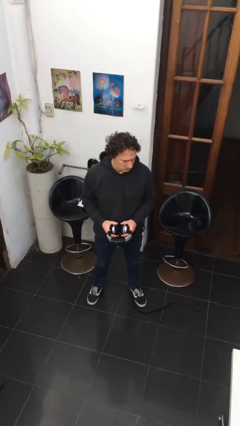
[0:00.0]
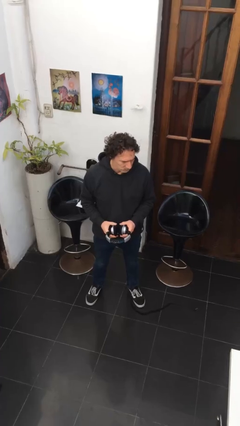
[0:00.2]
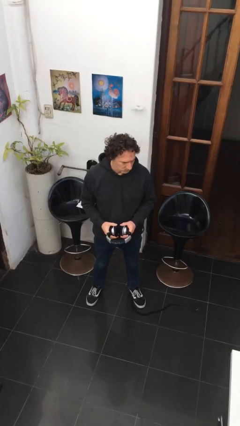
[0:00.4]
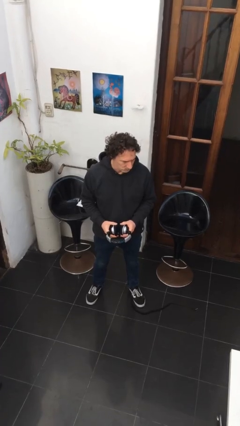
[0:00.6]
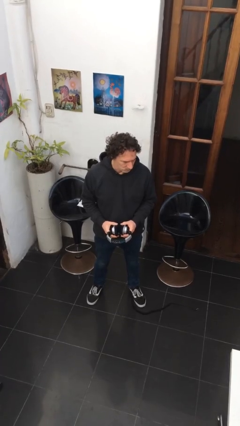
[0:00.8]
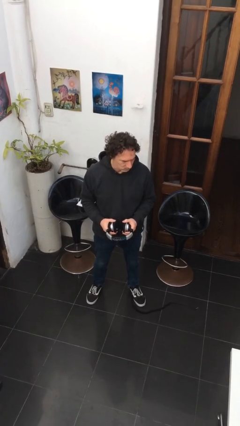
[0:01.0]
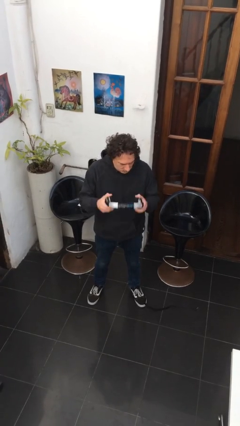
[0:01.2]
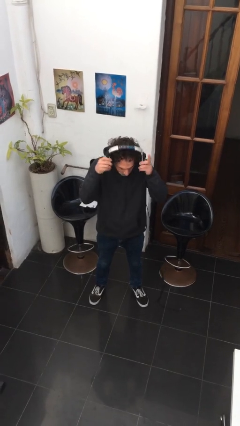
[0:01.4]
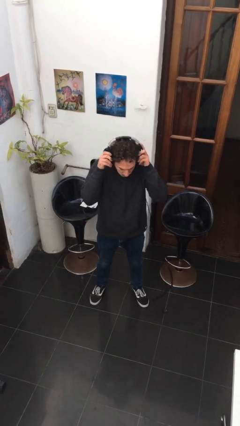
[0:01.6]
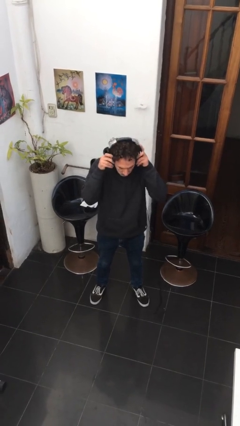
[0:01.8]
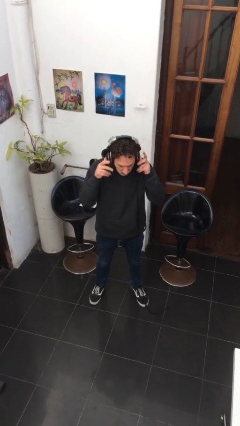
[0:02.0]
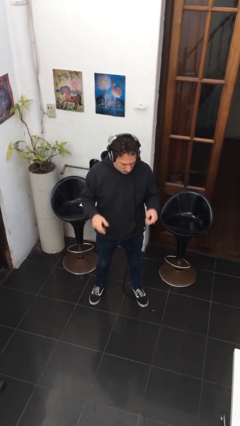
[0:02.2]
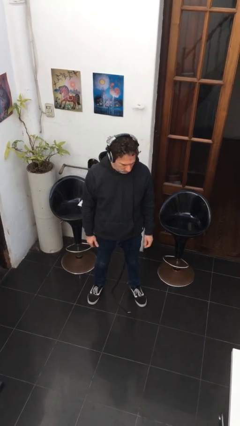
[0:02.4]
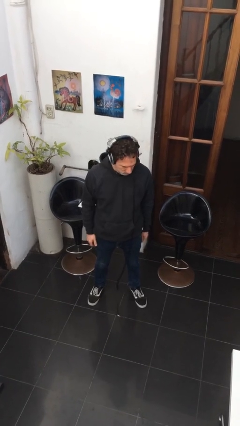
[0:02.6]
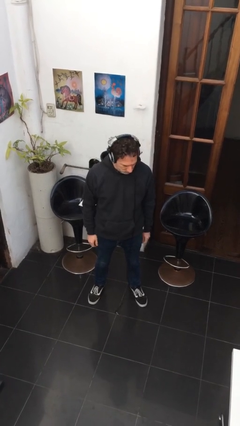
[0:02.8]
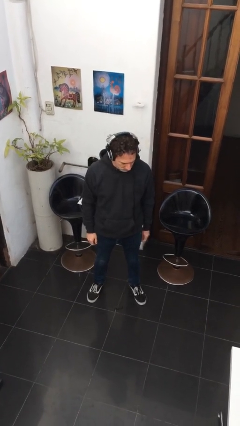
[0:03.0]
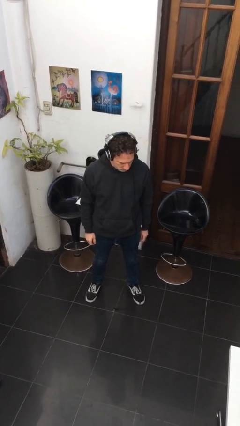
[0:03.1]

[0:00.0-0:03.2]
person puts on headphones

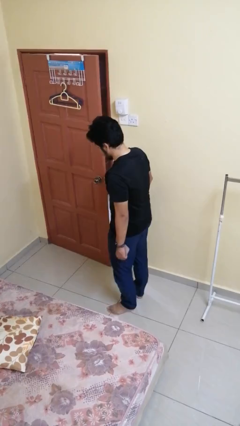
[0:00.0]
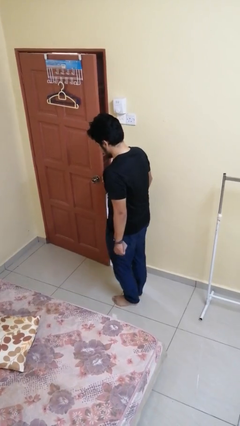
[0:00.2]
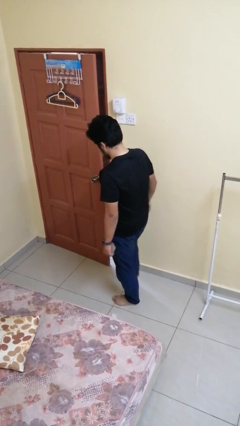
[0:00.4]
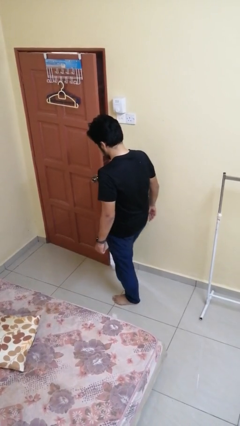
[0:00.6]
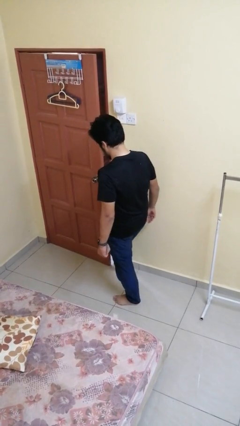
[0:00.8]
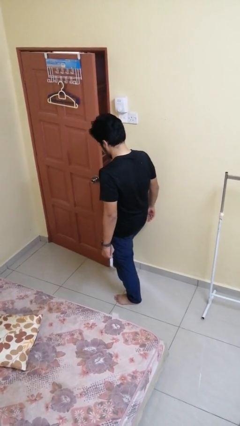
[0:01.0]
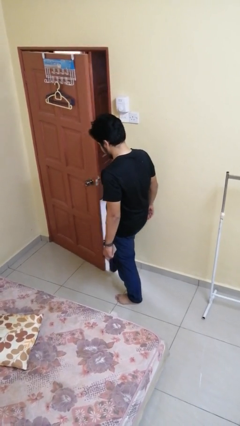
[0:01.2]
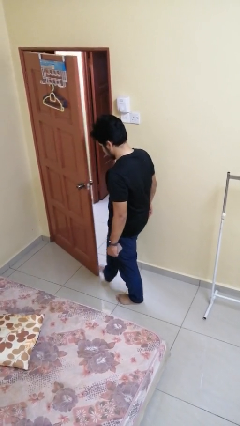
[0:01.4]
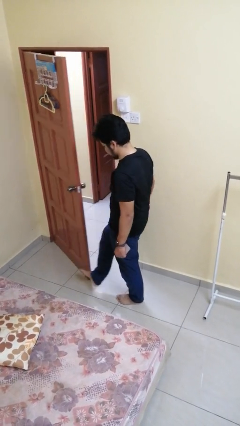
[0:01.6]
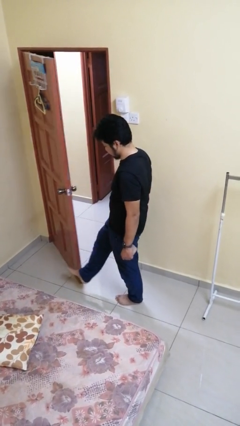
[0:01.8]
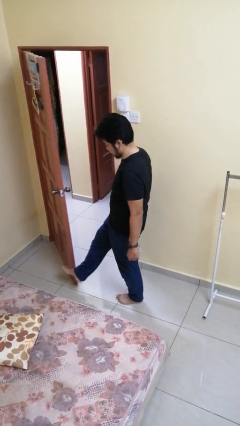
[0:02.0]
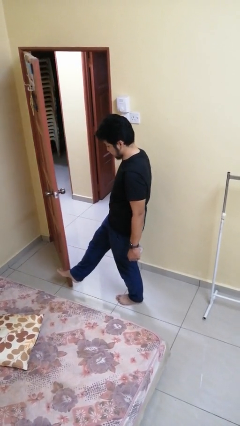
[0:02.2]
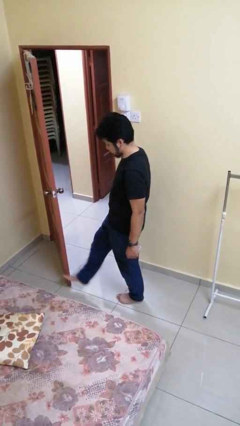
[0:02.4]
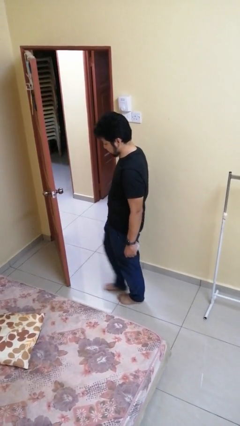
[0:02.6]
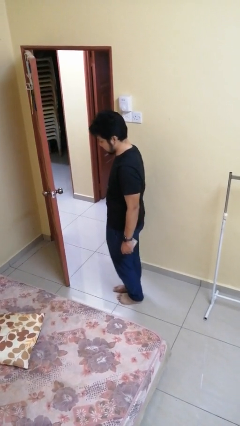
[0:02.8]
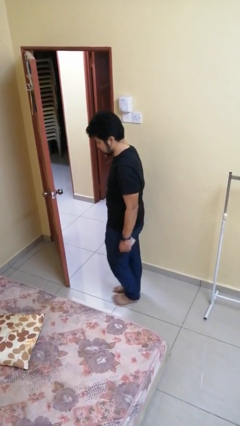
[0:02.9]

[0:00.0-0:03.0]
person opens facility door

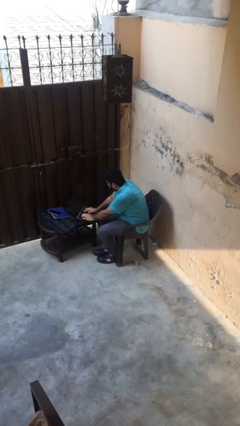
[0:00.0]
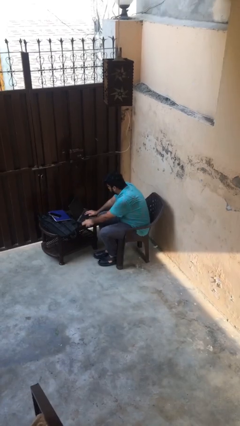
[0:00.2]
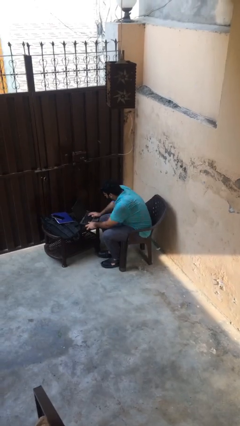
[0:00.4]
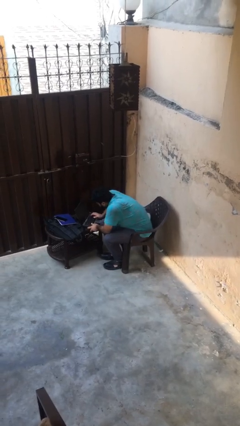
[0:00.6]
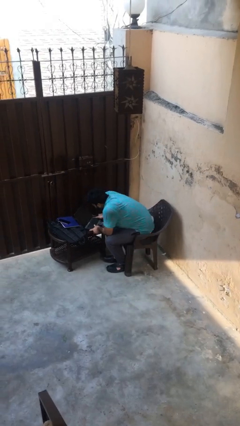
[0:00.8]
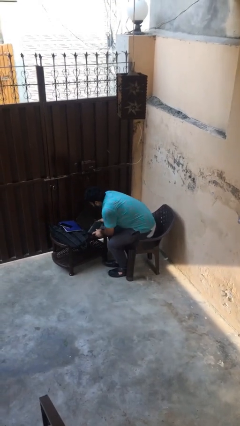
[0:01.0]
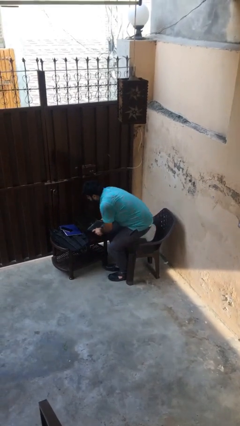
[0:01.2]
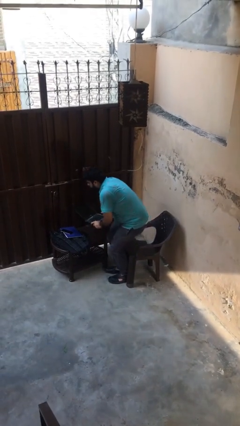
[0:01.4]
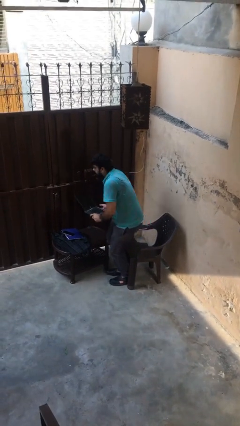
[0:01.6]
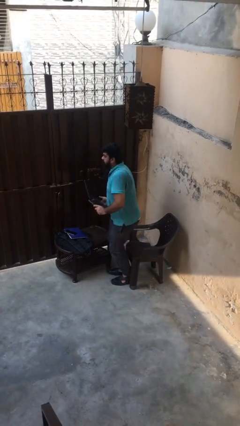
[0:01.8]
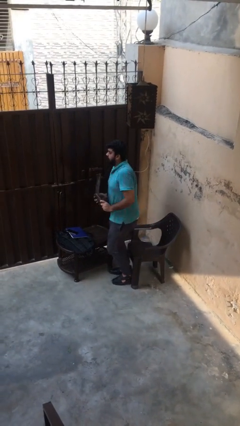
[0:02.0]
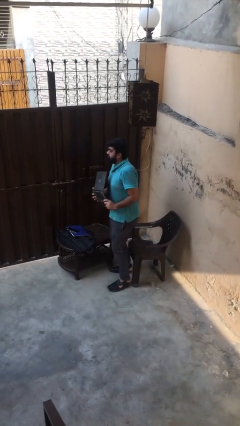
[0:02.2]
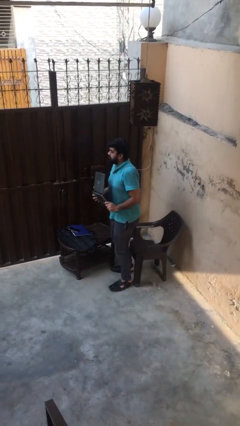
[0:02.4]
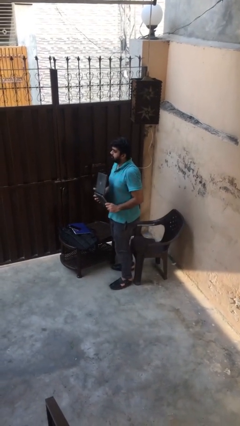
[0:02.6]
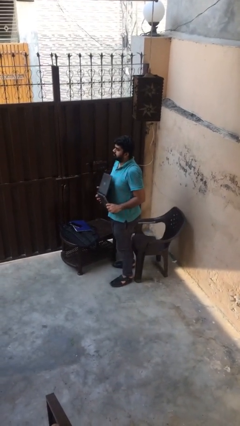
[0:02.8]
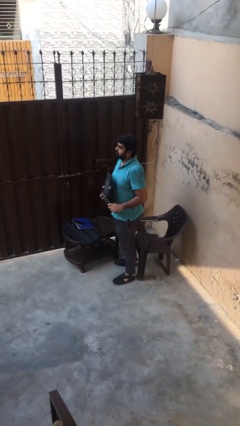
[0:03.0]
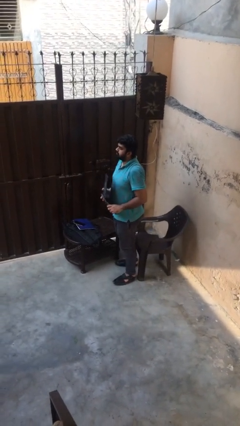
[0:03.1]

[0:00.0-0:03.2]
person stands up

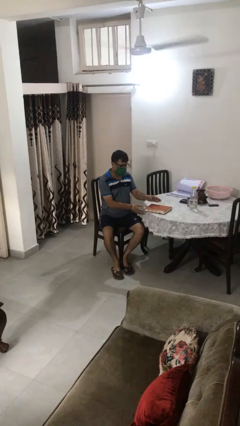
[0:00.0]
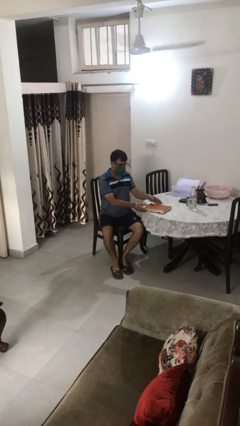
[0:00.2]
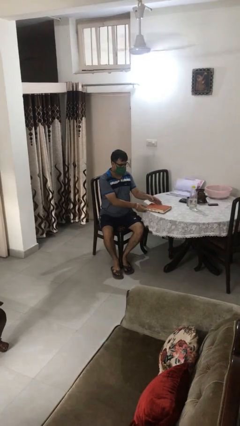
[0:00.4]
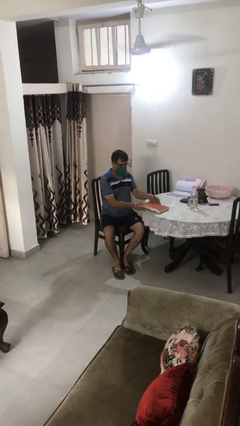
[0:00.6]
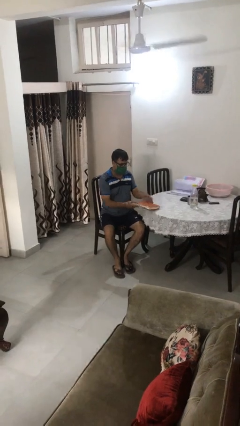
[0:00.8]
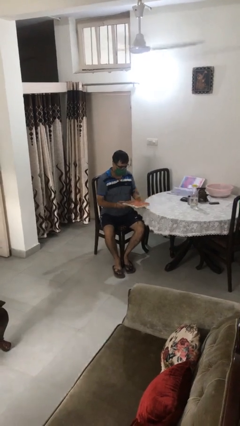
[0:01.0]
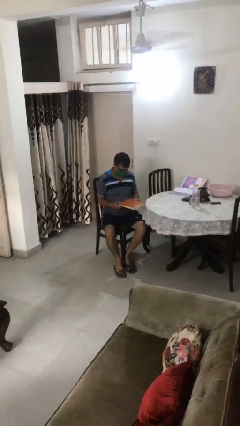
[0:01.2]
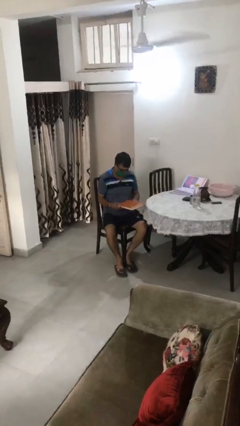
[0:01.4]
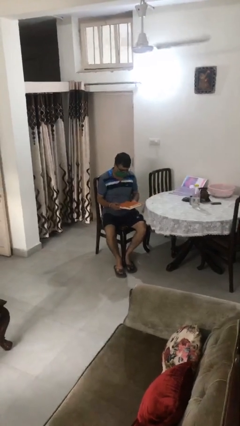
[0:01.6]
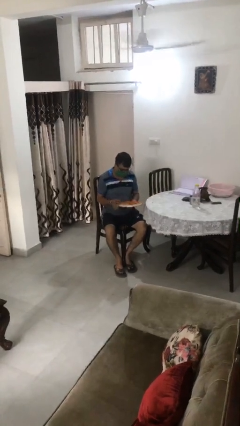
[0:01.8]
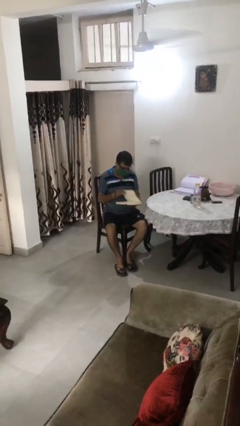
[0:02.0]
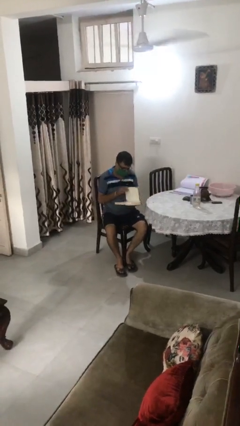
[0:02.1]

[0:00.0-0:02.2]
person picks up object from table

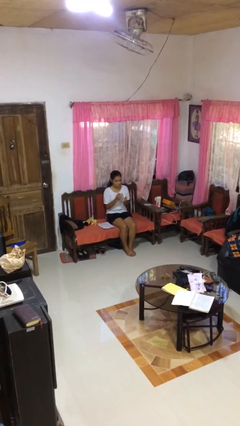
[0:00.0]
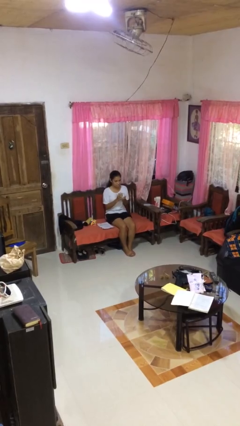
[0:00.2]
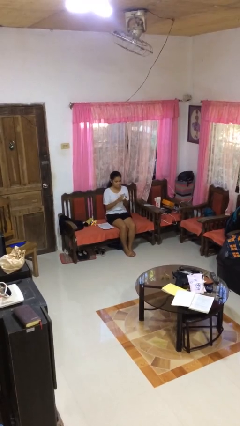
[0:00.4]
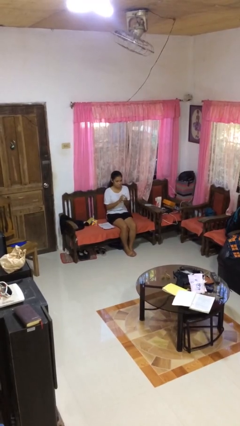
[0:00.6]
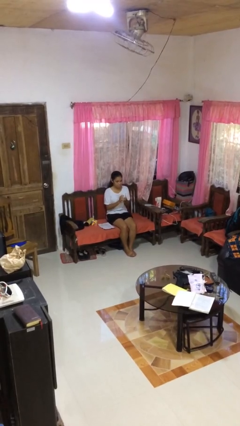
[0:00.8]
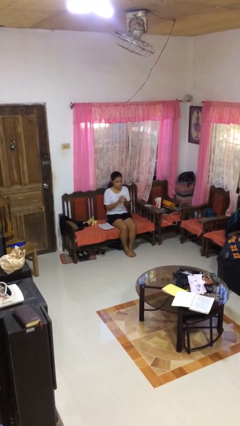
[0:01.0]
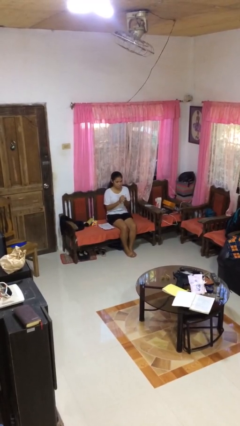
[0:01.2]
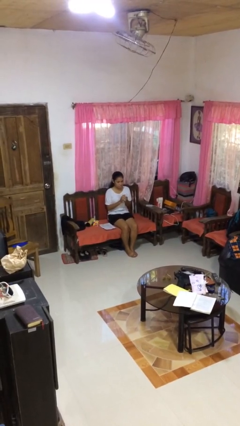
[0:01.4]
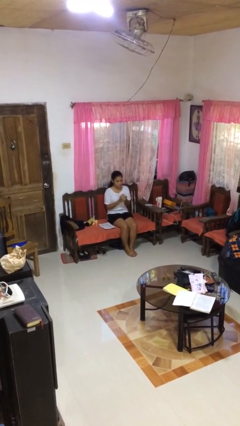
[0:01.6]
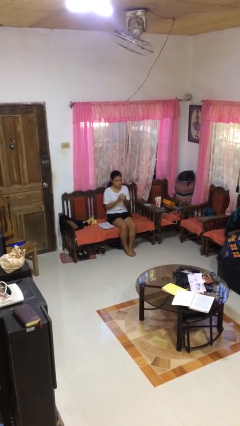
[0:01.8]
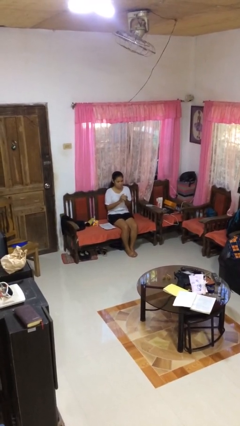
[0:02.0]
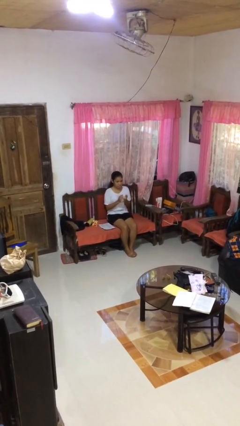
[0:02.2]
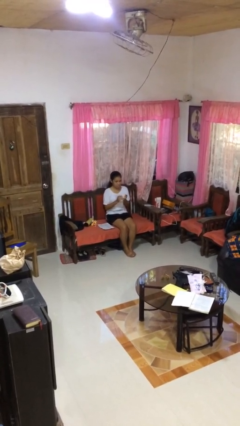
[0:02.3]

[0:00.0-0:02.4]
person crumples paper

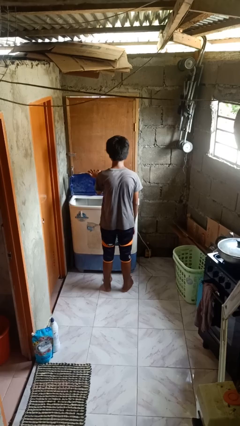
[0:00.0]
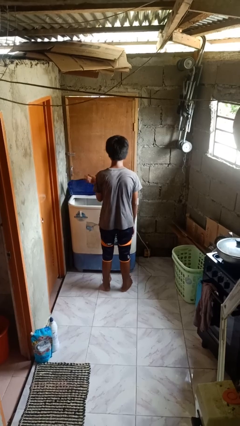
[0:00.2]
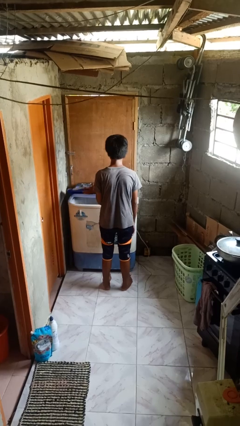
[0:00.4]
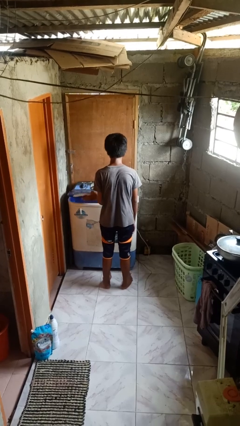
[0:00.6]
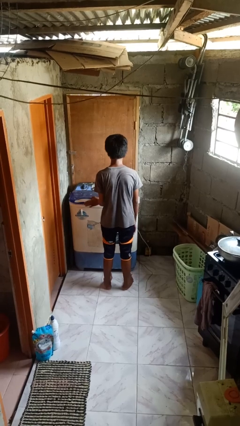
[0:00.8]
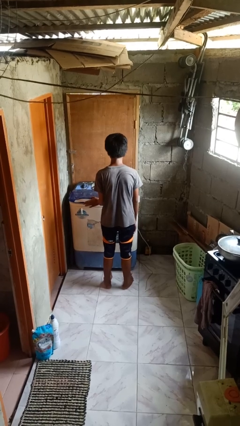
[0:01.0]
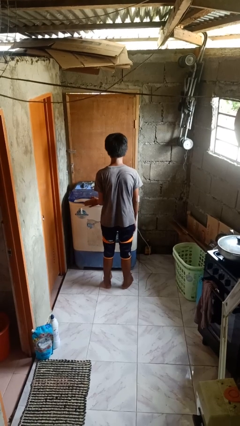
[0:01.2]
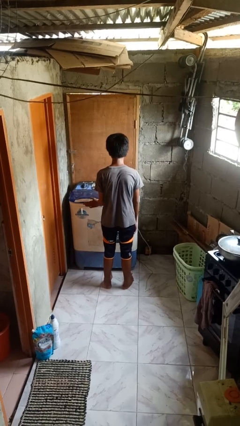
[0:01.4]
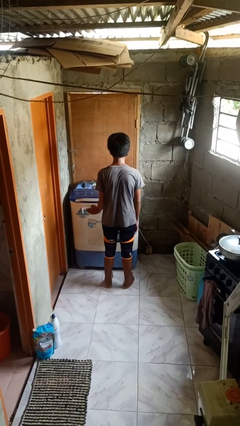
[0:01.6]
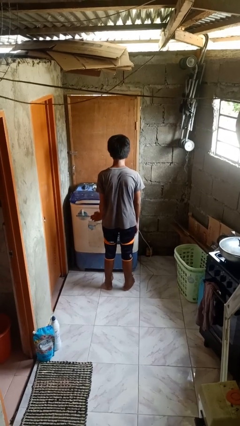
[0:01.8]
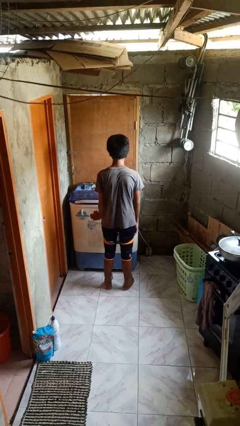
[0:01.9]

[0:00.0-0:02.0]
person closes clothes washer

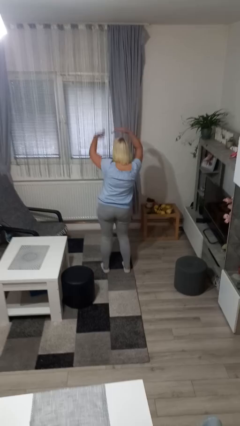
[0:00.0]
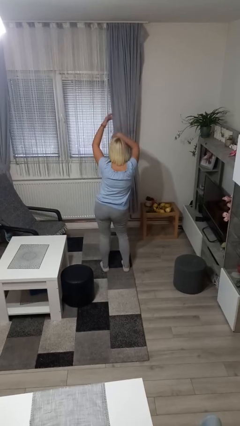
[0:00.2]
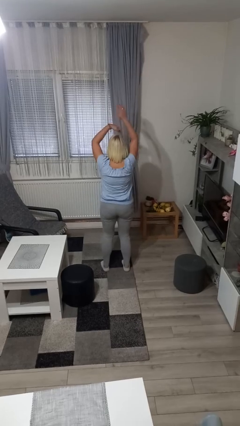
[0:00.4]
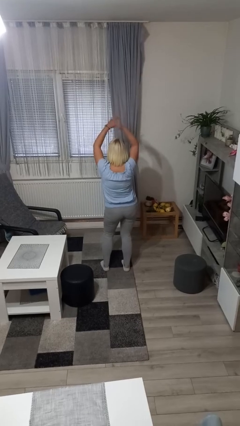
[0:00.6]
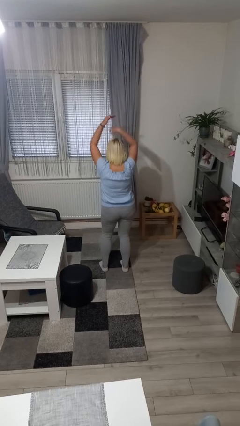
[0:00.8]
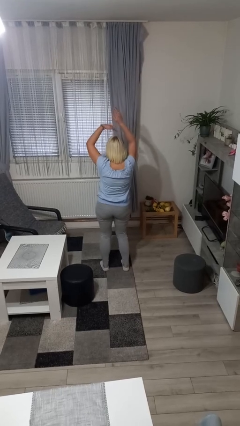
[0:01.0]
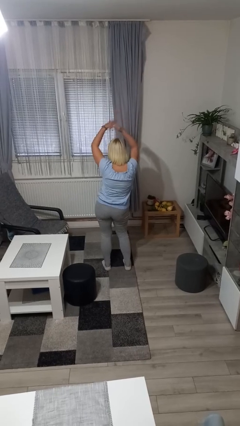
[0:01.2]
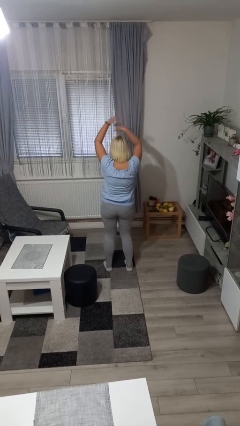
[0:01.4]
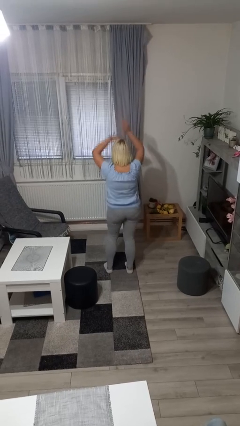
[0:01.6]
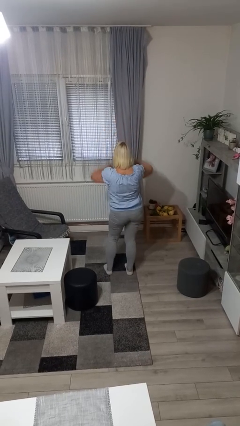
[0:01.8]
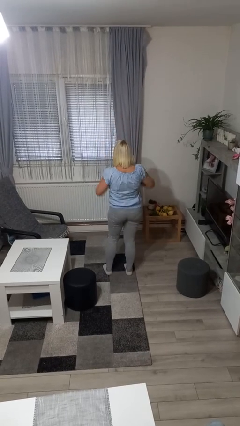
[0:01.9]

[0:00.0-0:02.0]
person dances in place
